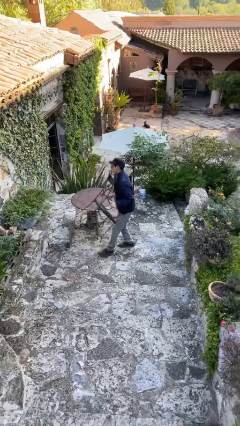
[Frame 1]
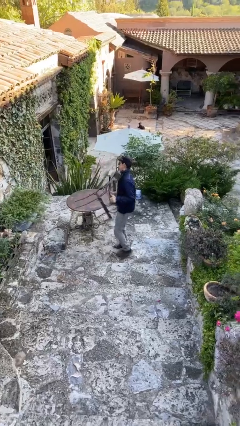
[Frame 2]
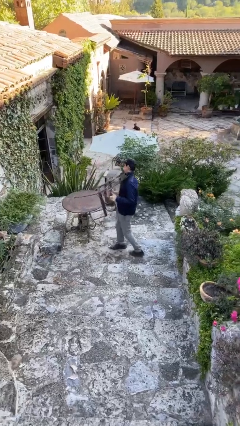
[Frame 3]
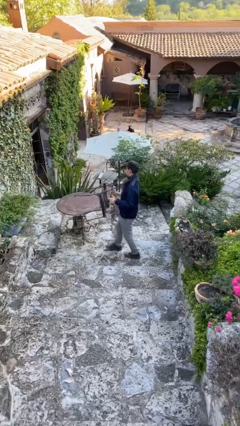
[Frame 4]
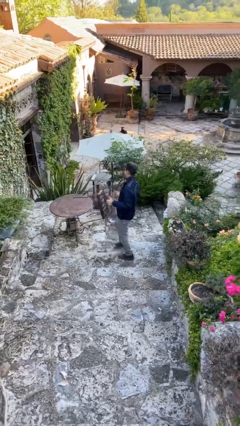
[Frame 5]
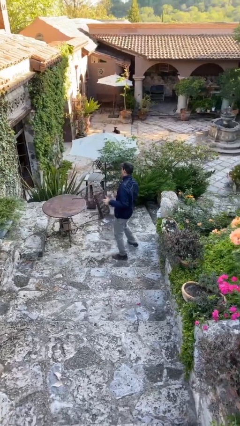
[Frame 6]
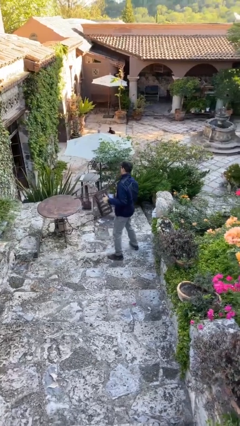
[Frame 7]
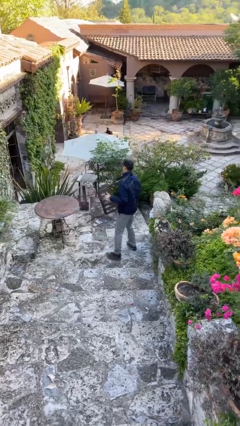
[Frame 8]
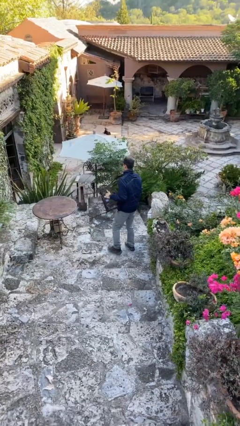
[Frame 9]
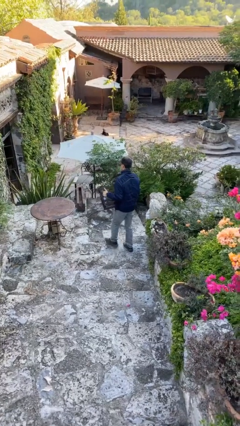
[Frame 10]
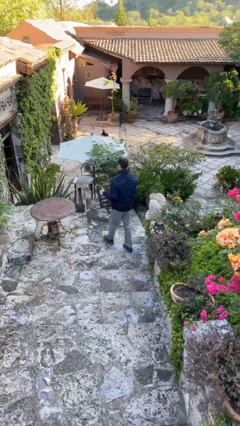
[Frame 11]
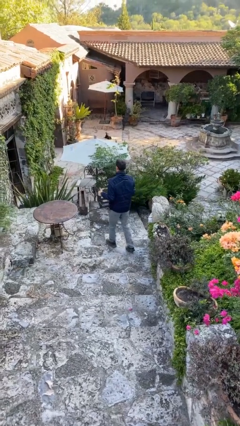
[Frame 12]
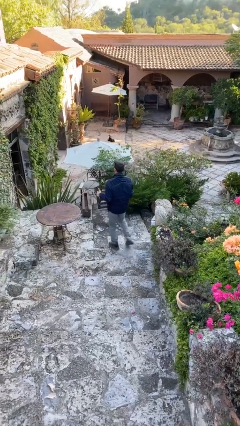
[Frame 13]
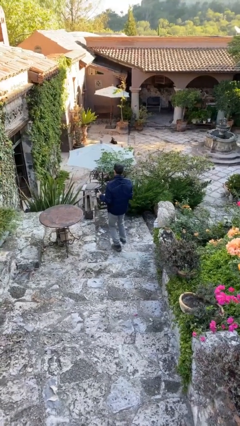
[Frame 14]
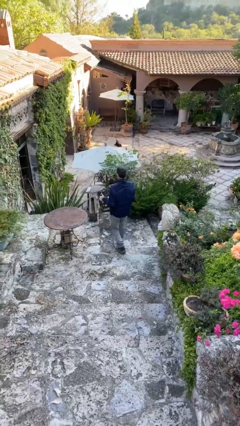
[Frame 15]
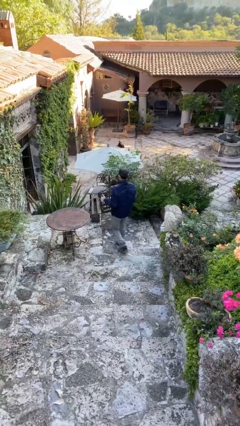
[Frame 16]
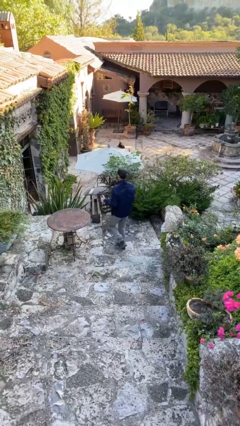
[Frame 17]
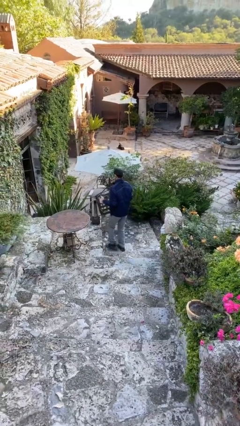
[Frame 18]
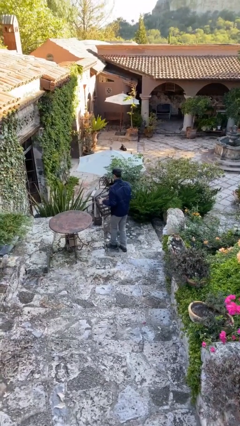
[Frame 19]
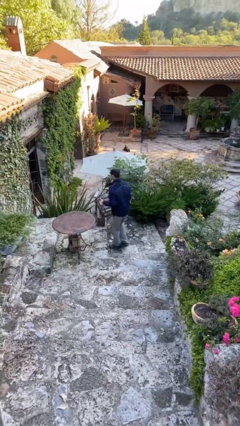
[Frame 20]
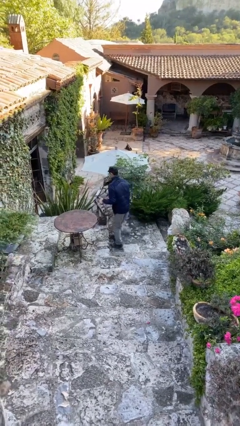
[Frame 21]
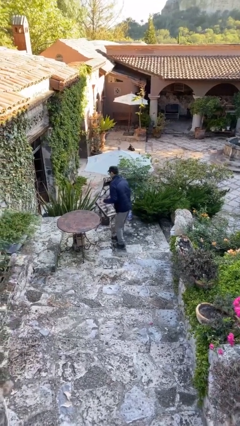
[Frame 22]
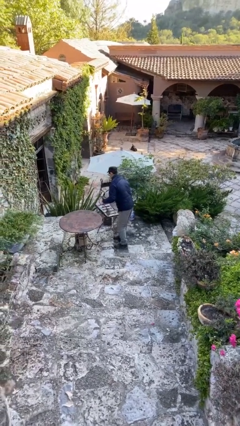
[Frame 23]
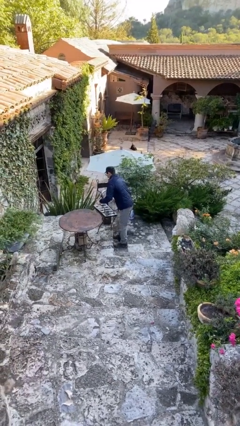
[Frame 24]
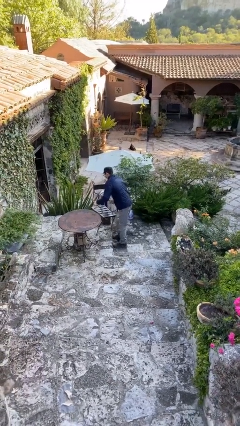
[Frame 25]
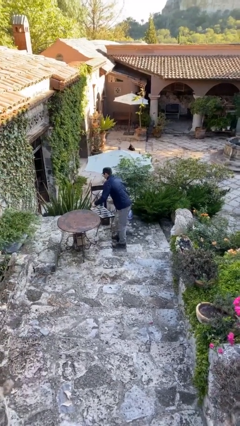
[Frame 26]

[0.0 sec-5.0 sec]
person carries heavy object

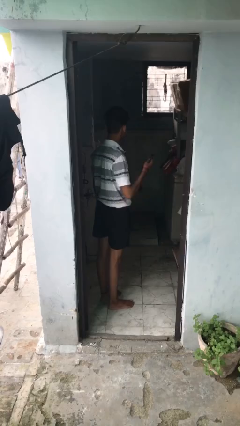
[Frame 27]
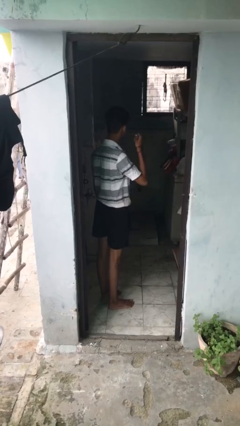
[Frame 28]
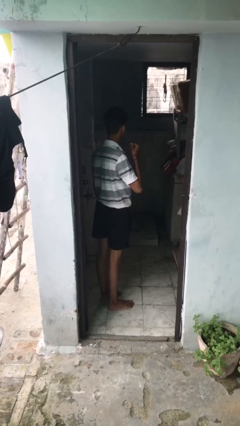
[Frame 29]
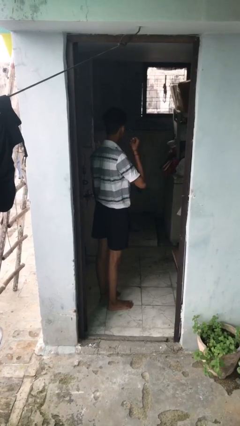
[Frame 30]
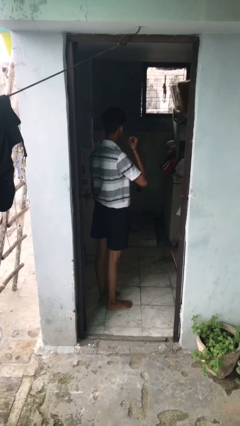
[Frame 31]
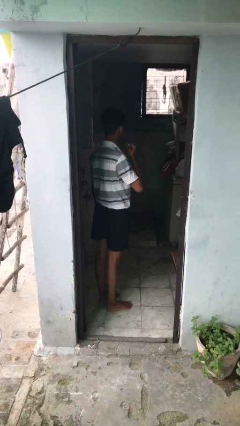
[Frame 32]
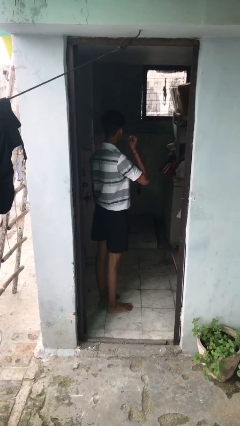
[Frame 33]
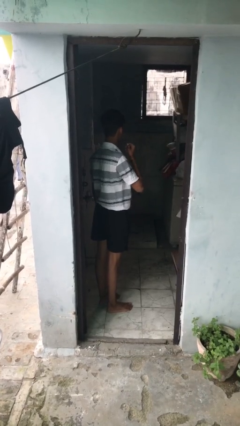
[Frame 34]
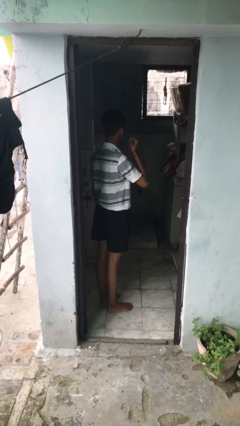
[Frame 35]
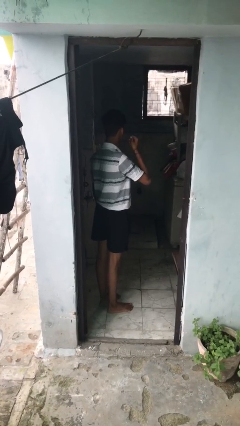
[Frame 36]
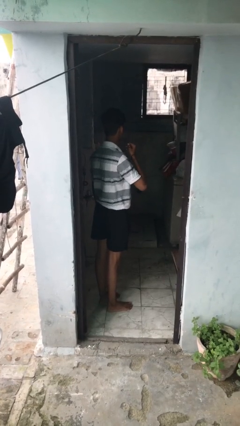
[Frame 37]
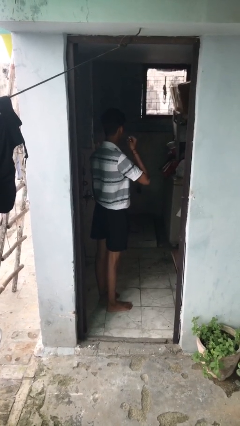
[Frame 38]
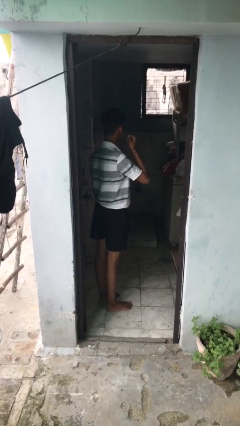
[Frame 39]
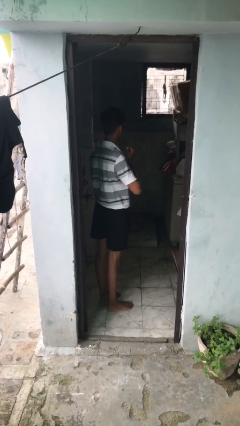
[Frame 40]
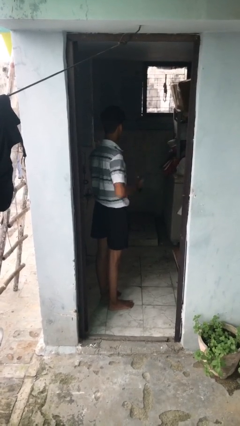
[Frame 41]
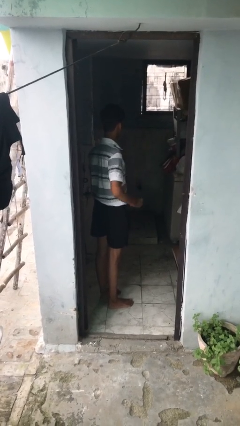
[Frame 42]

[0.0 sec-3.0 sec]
person shaves face

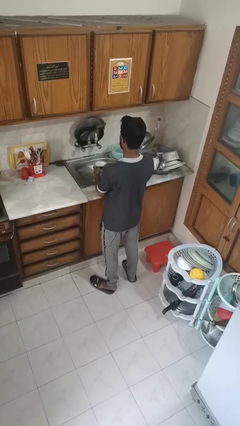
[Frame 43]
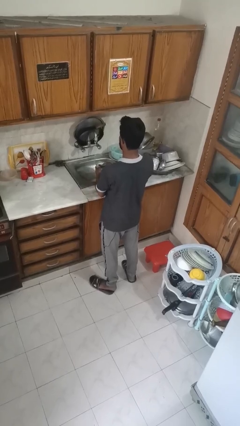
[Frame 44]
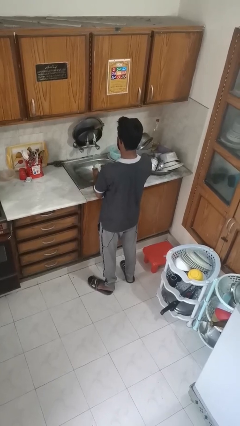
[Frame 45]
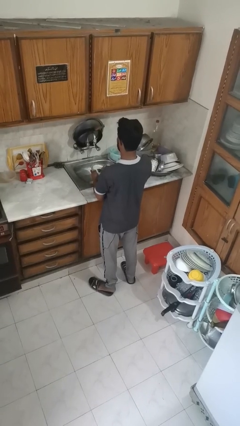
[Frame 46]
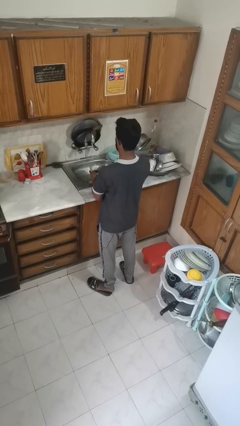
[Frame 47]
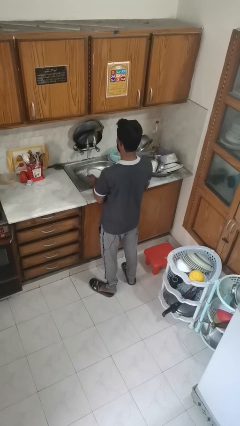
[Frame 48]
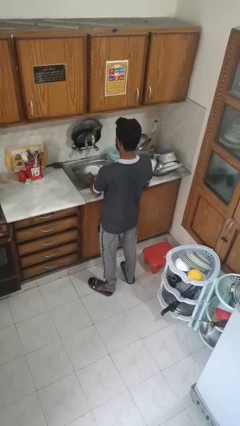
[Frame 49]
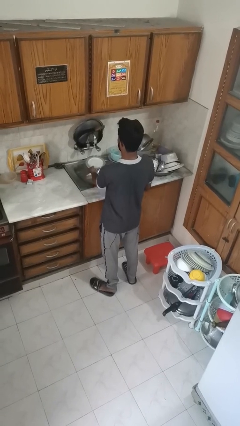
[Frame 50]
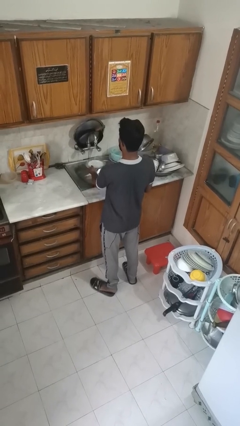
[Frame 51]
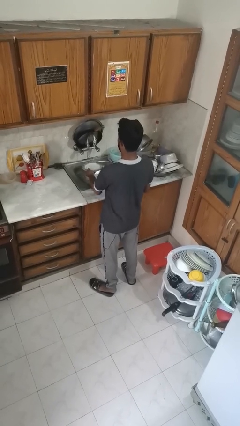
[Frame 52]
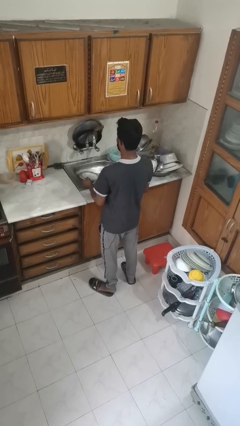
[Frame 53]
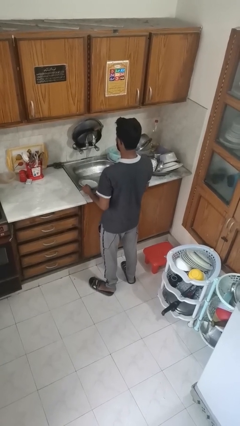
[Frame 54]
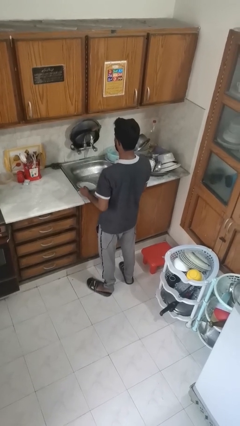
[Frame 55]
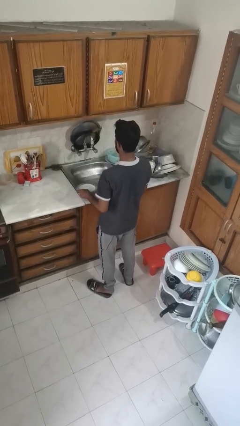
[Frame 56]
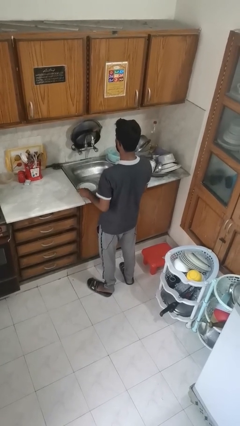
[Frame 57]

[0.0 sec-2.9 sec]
person washes dish

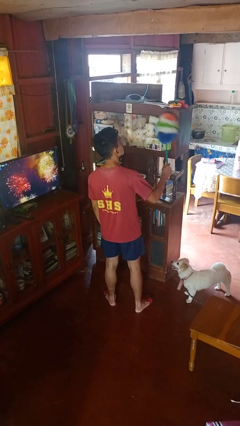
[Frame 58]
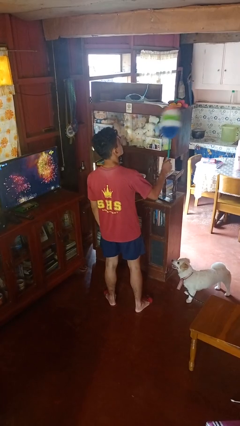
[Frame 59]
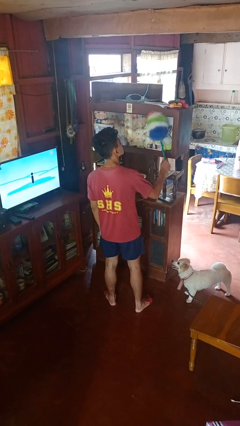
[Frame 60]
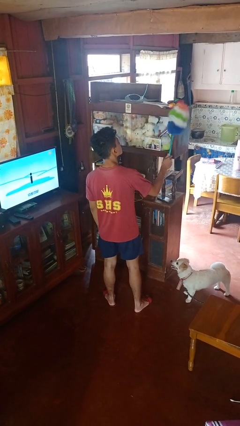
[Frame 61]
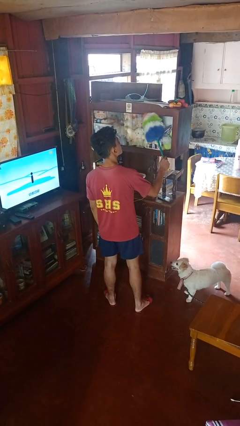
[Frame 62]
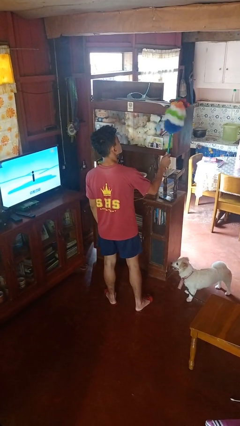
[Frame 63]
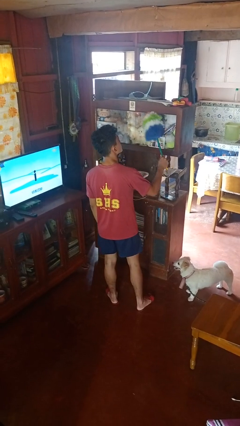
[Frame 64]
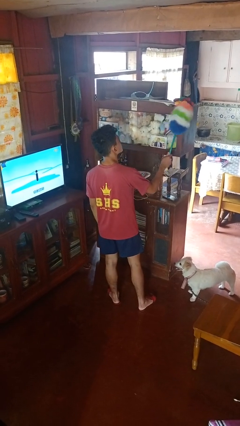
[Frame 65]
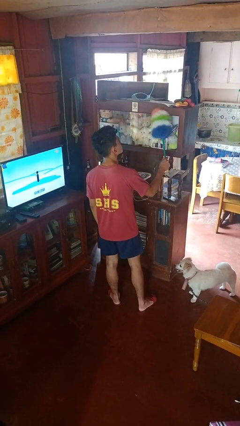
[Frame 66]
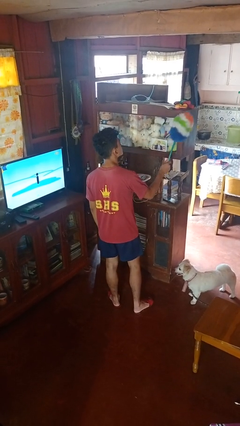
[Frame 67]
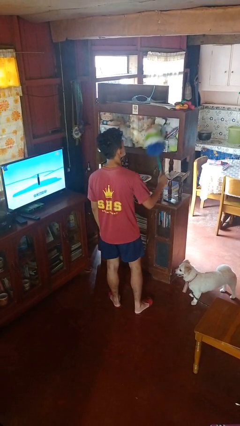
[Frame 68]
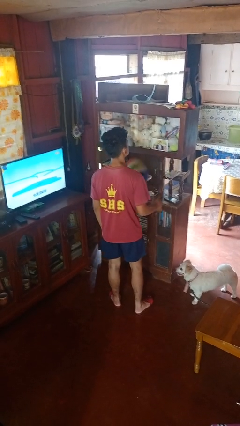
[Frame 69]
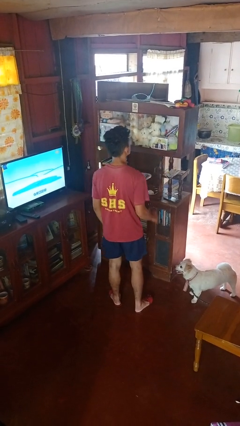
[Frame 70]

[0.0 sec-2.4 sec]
person dusts furniture

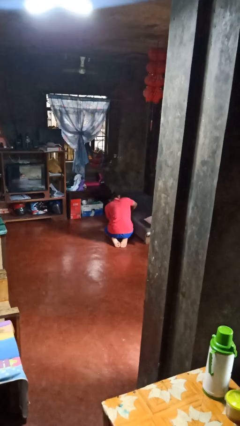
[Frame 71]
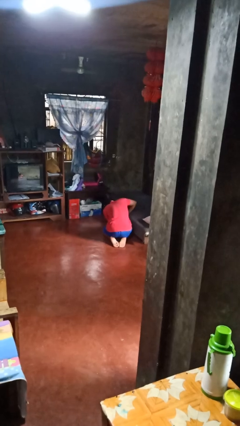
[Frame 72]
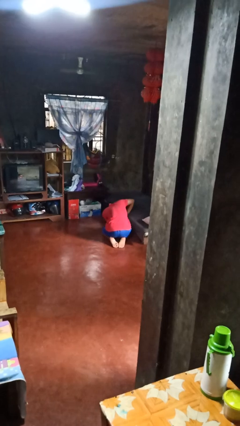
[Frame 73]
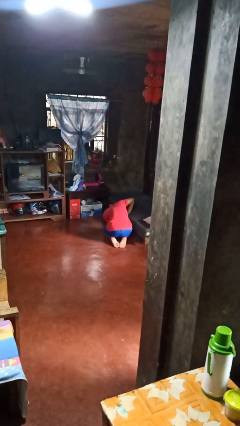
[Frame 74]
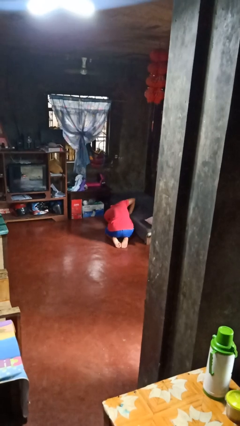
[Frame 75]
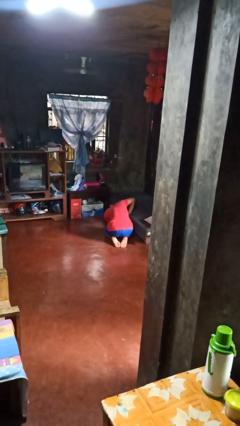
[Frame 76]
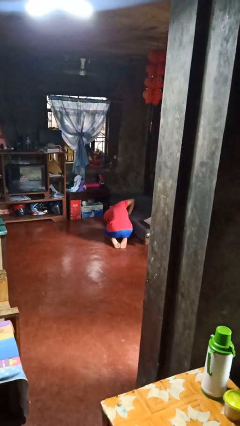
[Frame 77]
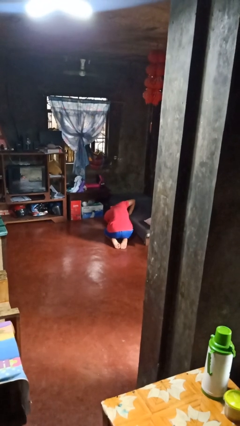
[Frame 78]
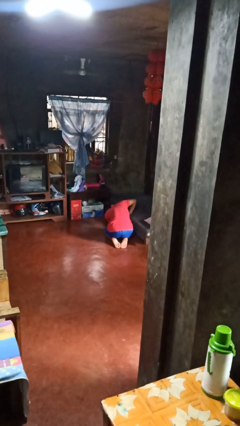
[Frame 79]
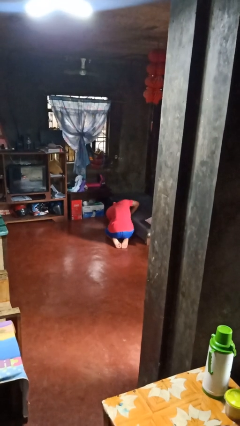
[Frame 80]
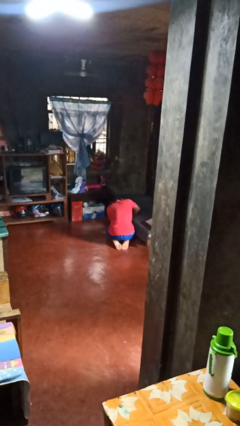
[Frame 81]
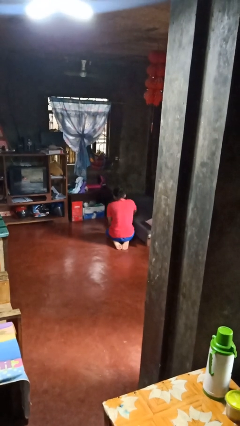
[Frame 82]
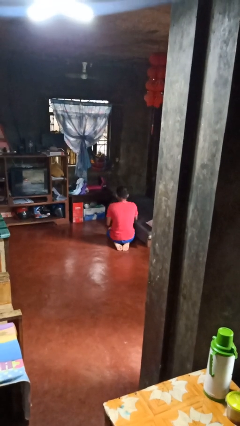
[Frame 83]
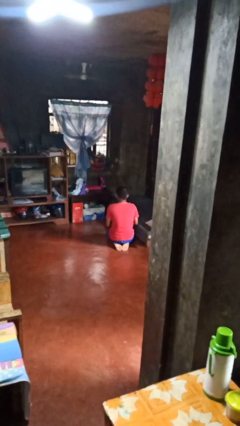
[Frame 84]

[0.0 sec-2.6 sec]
person searches under bed

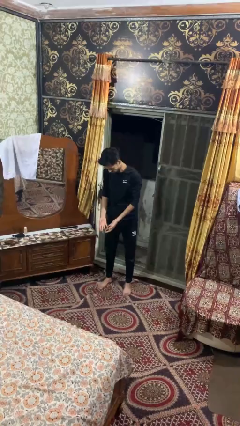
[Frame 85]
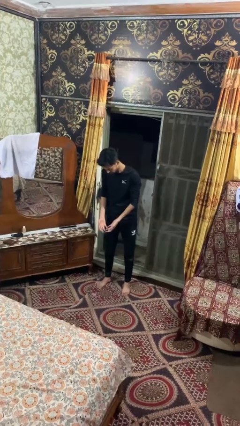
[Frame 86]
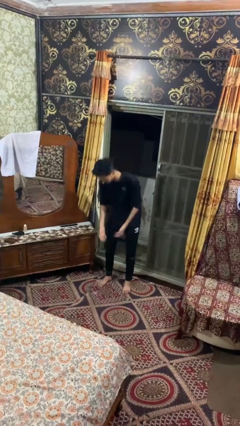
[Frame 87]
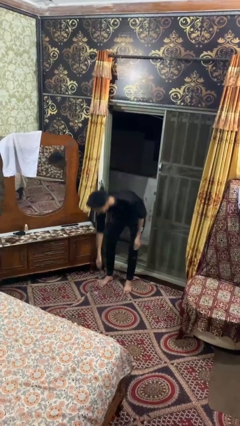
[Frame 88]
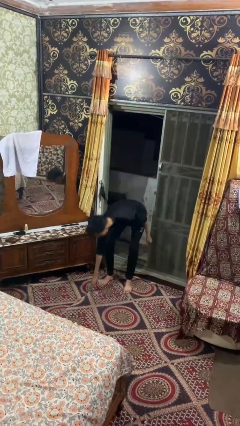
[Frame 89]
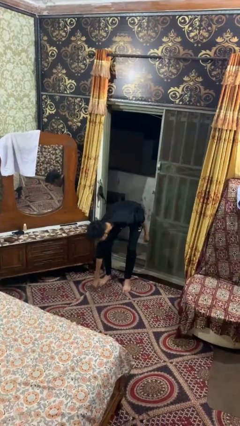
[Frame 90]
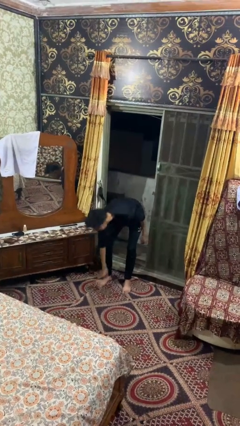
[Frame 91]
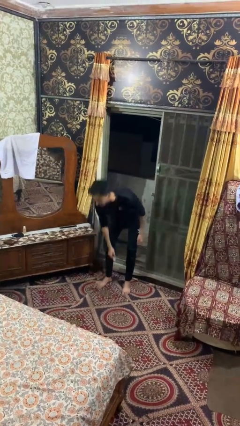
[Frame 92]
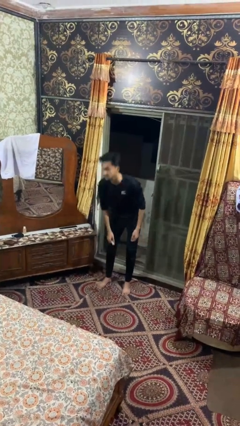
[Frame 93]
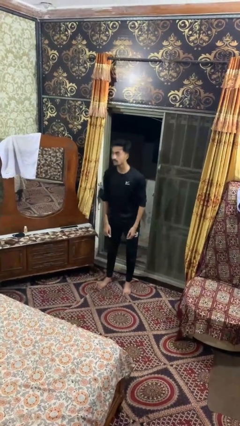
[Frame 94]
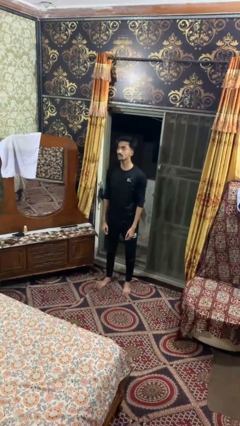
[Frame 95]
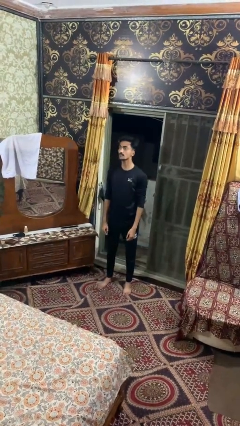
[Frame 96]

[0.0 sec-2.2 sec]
person picks up object from floor
